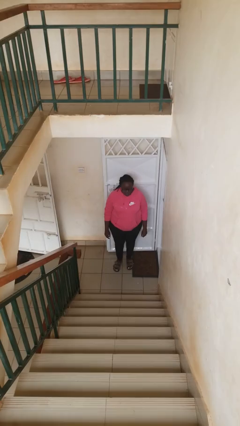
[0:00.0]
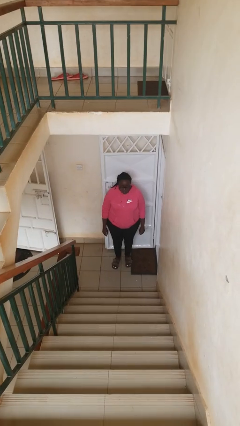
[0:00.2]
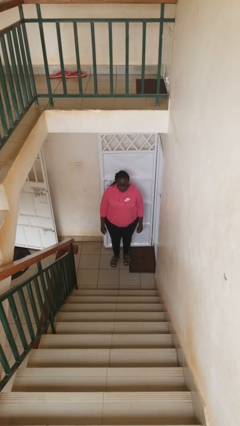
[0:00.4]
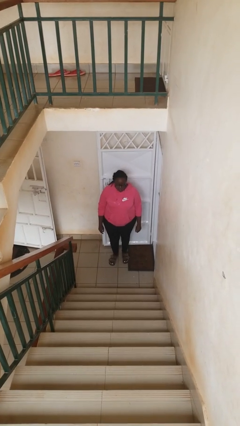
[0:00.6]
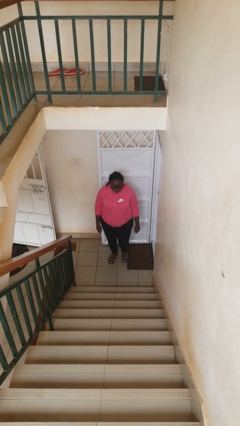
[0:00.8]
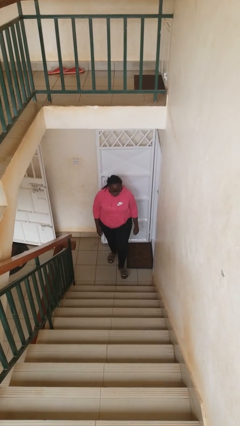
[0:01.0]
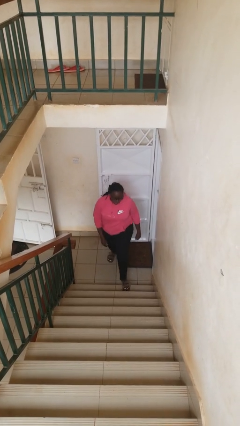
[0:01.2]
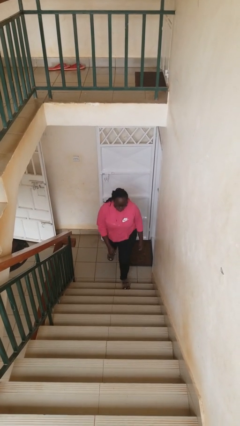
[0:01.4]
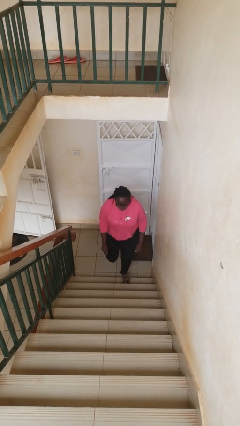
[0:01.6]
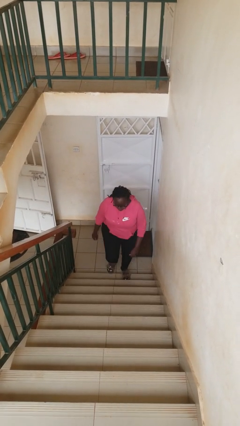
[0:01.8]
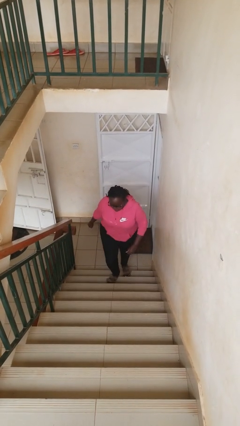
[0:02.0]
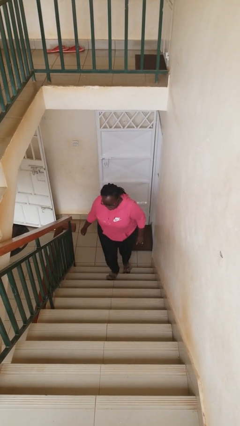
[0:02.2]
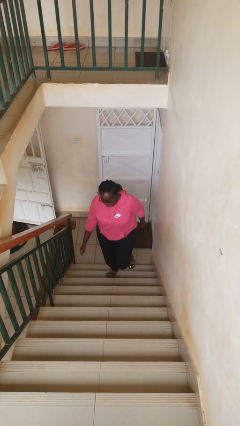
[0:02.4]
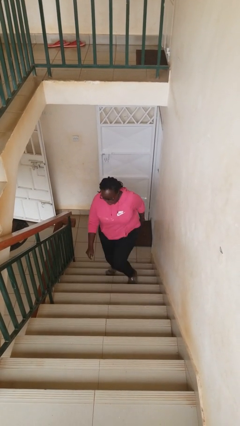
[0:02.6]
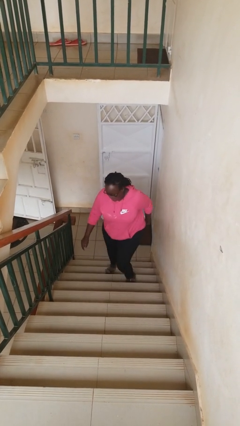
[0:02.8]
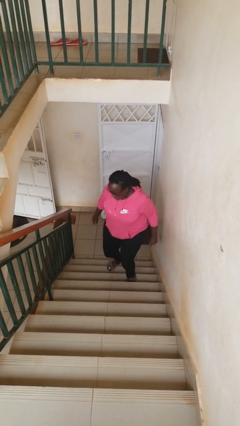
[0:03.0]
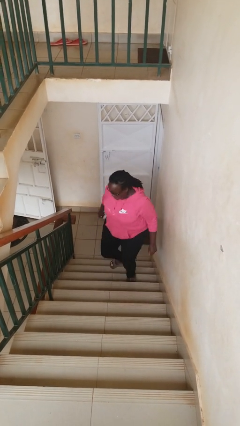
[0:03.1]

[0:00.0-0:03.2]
person climbs up stairs

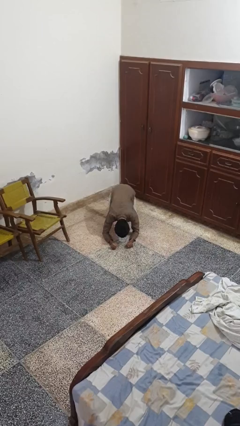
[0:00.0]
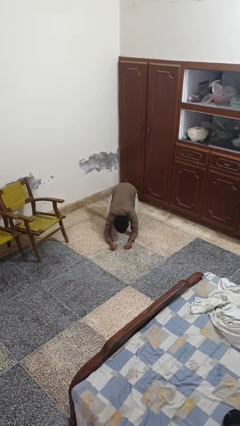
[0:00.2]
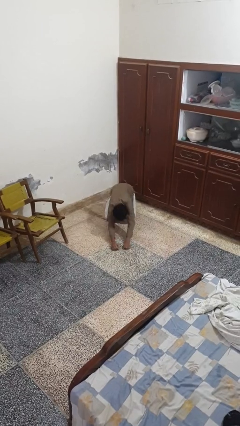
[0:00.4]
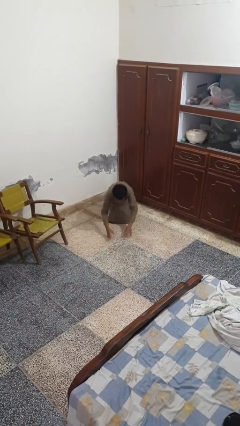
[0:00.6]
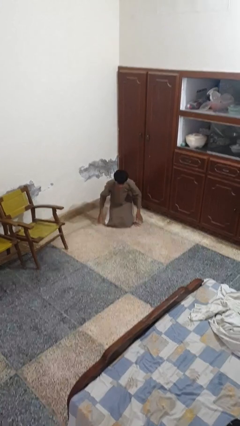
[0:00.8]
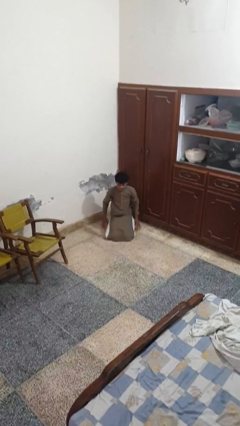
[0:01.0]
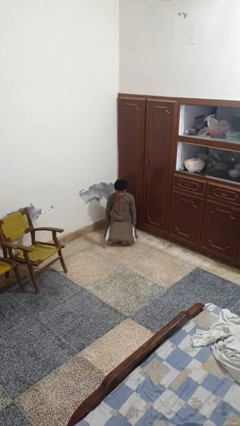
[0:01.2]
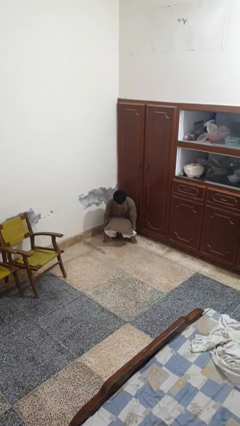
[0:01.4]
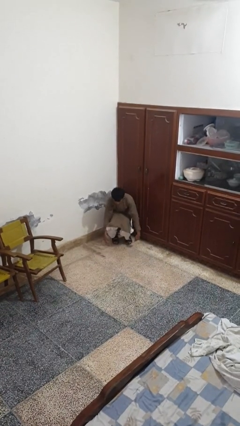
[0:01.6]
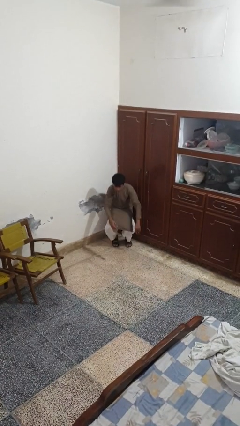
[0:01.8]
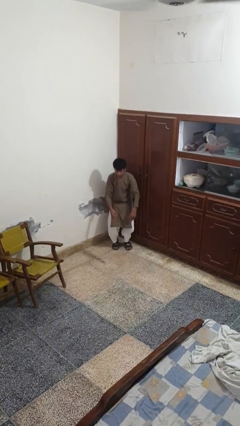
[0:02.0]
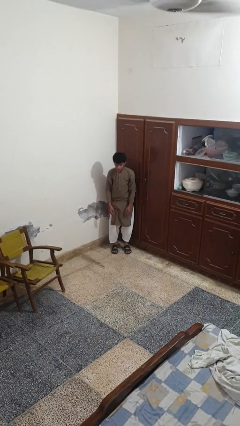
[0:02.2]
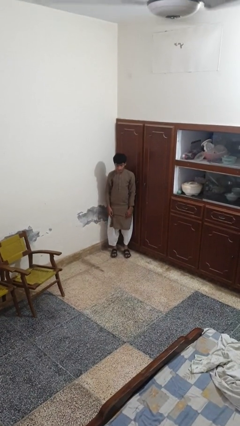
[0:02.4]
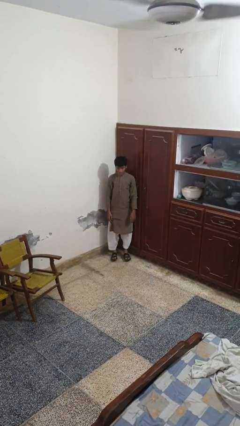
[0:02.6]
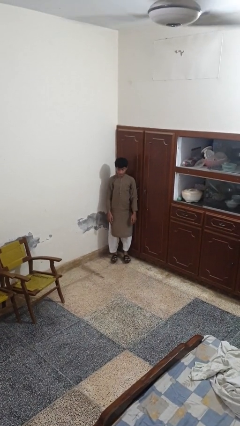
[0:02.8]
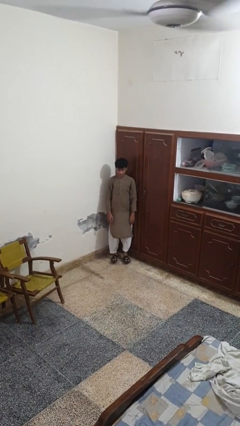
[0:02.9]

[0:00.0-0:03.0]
person stands up from floor

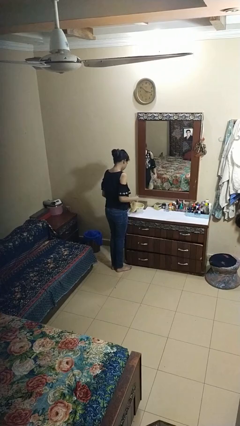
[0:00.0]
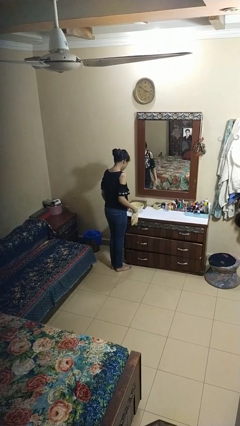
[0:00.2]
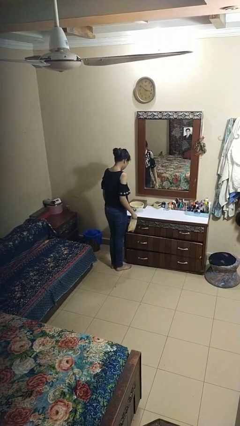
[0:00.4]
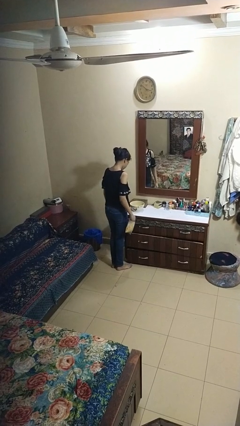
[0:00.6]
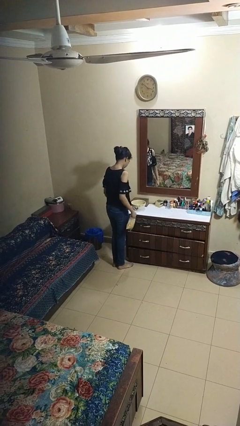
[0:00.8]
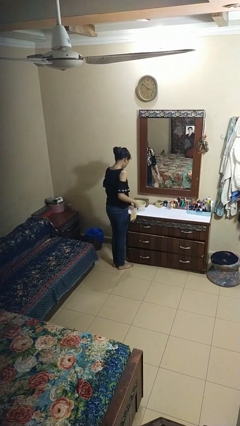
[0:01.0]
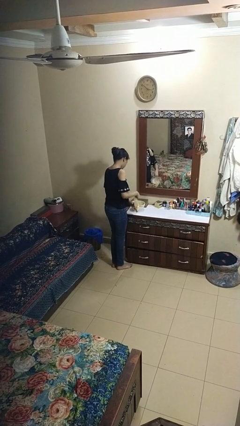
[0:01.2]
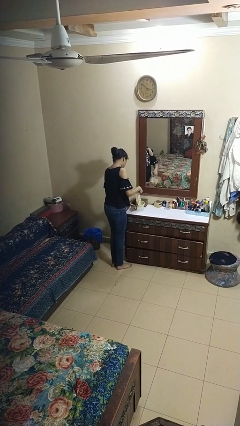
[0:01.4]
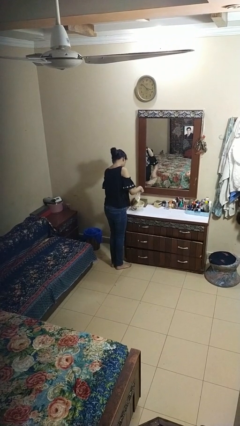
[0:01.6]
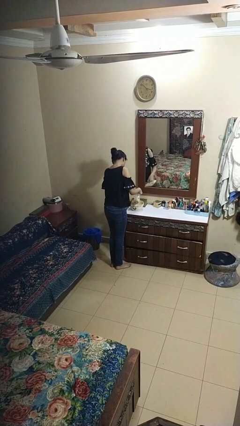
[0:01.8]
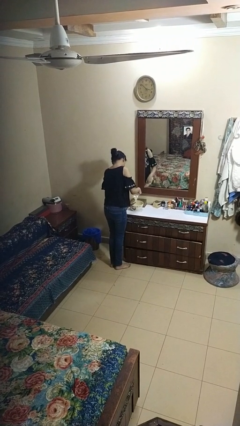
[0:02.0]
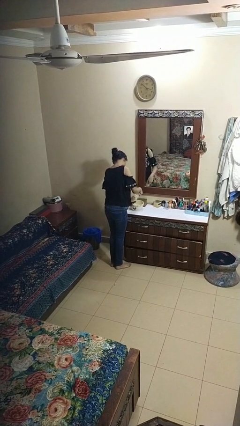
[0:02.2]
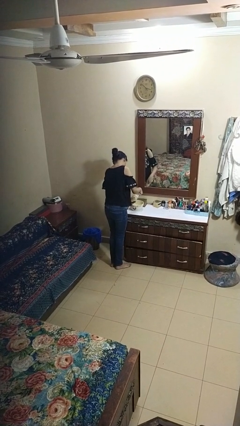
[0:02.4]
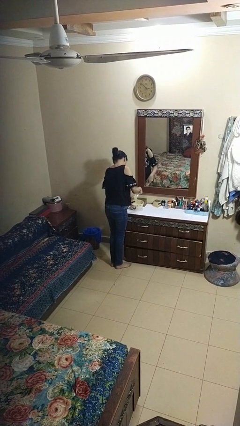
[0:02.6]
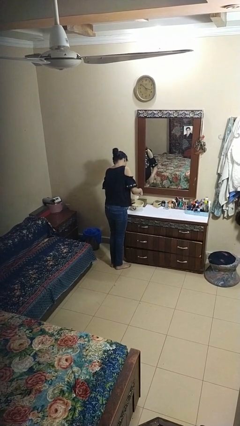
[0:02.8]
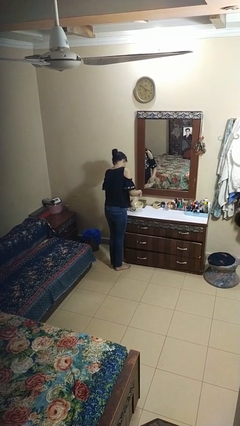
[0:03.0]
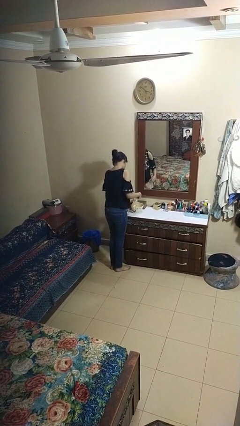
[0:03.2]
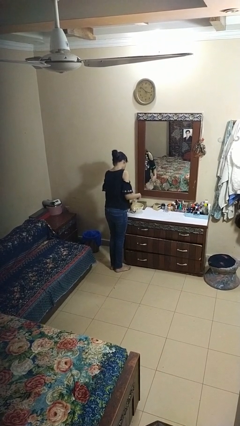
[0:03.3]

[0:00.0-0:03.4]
person pours into bowl

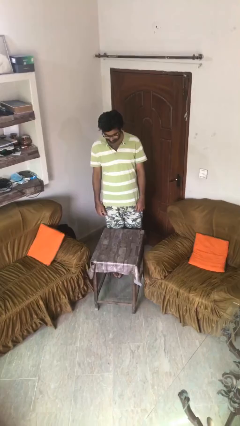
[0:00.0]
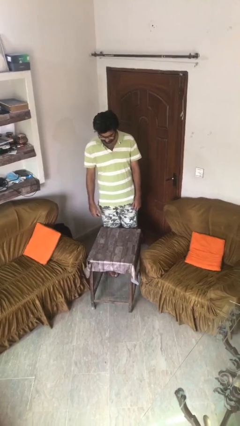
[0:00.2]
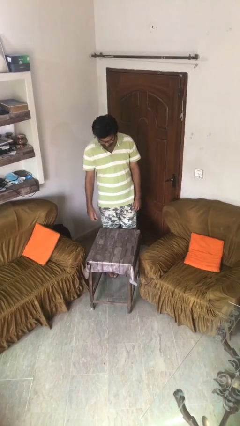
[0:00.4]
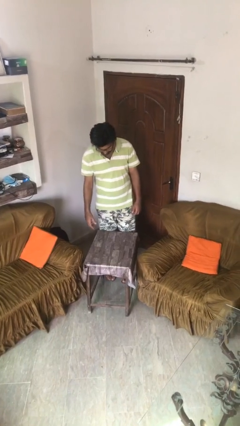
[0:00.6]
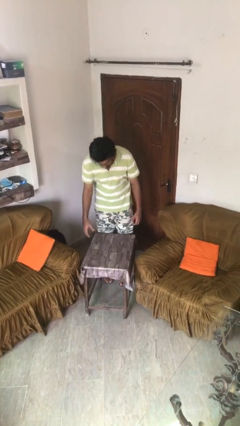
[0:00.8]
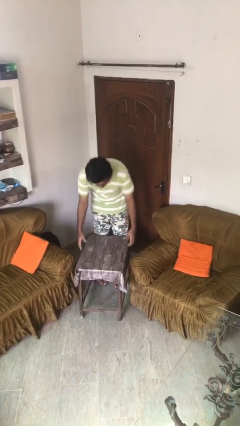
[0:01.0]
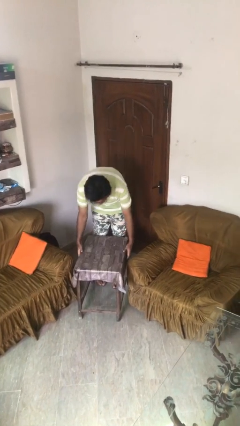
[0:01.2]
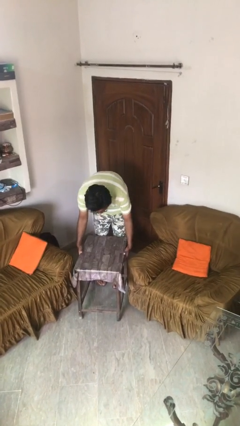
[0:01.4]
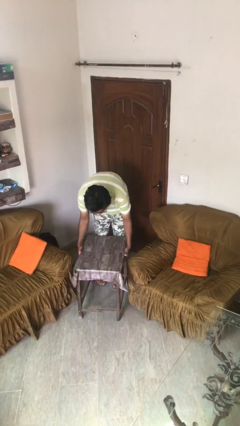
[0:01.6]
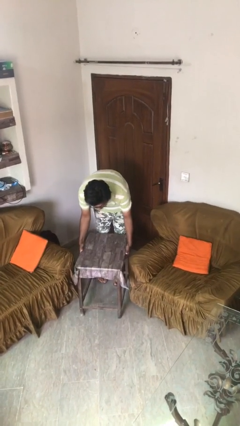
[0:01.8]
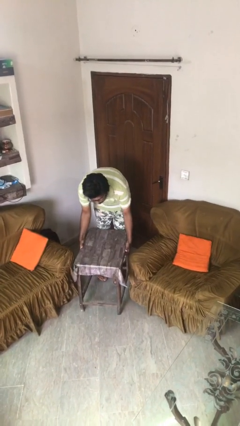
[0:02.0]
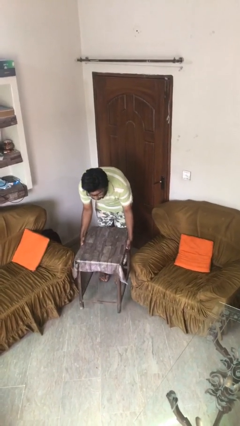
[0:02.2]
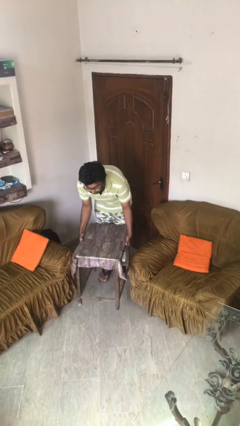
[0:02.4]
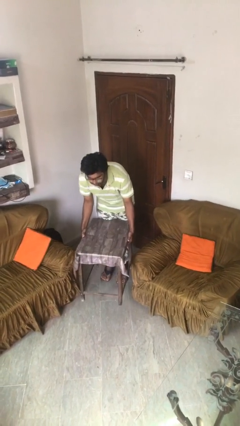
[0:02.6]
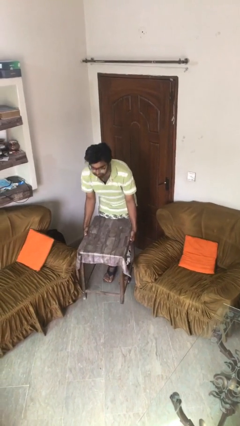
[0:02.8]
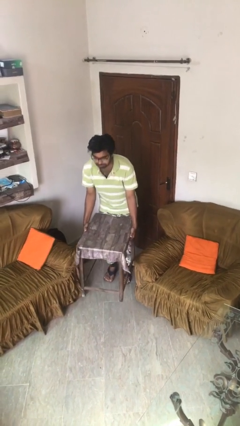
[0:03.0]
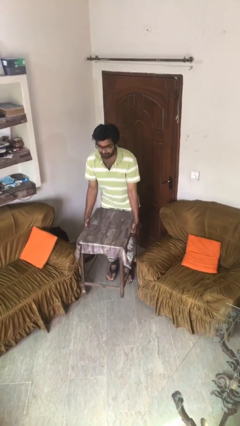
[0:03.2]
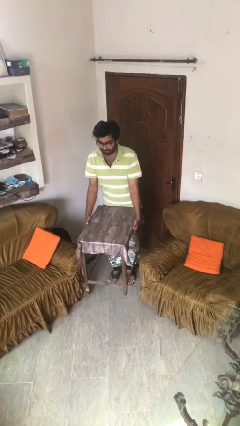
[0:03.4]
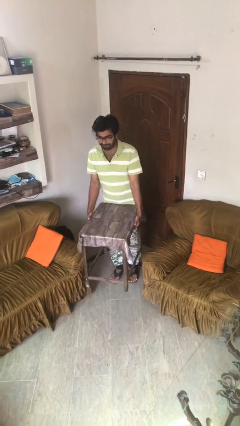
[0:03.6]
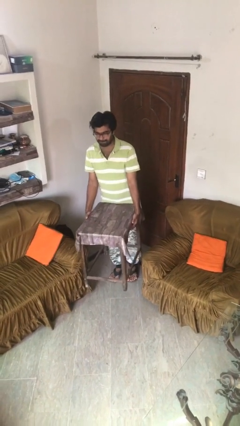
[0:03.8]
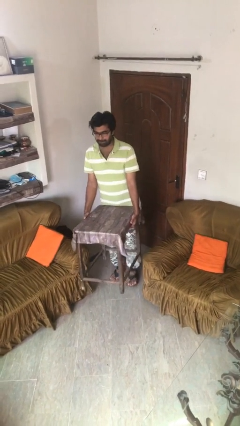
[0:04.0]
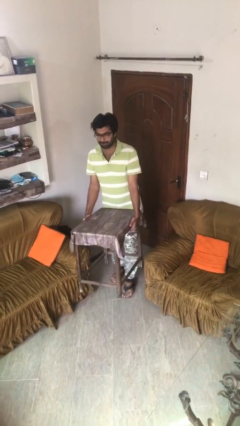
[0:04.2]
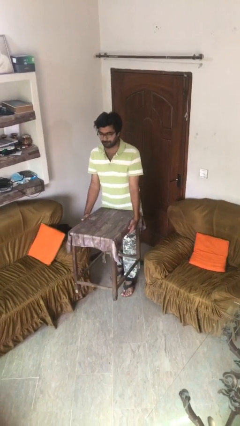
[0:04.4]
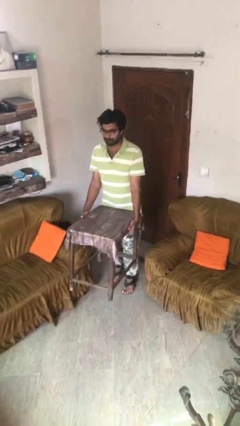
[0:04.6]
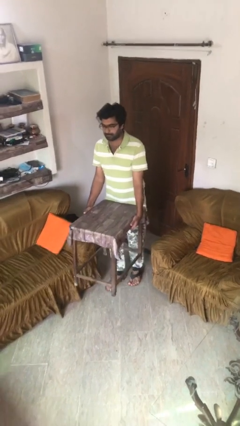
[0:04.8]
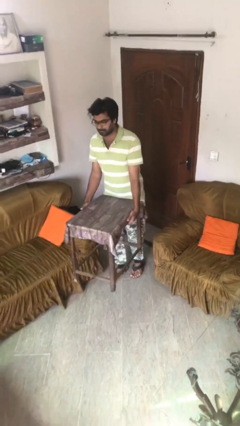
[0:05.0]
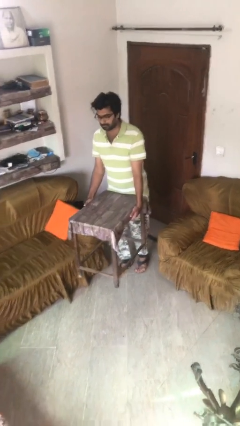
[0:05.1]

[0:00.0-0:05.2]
person picks up object from floor

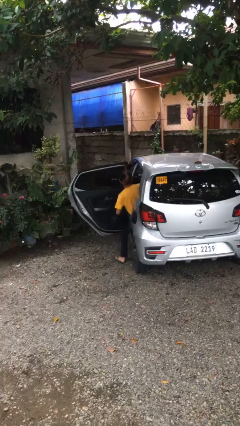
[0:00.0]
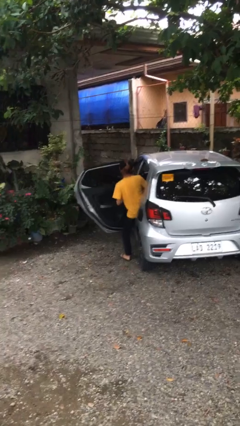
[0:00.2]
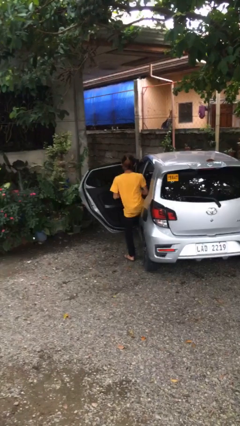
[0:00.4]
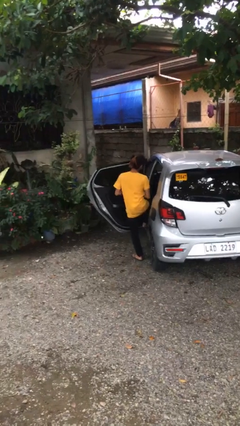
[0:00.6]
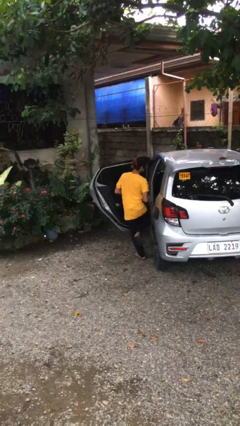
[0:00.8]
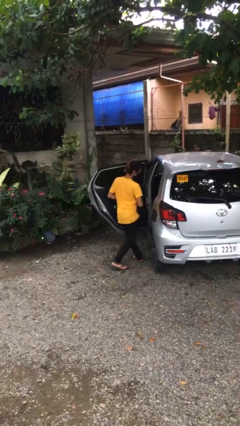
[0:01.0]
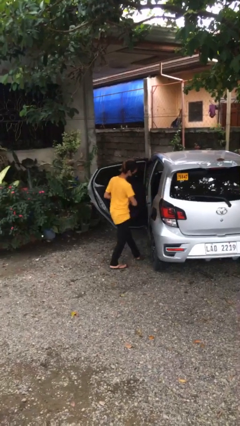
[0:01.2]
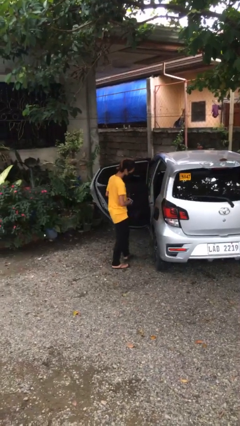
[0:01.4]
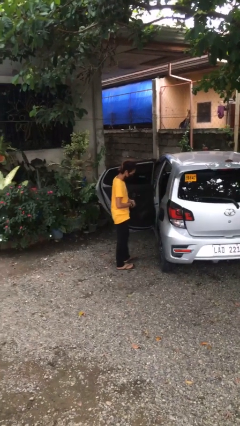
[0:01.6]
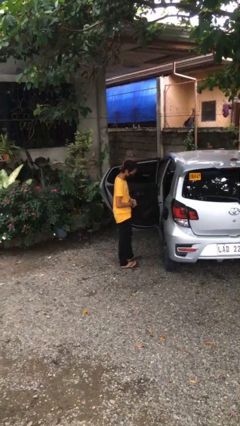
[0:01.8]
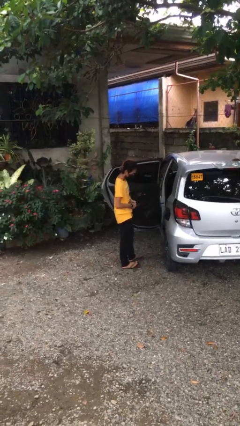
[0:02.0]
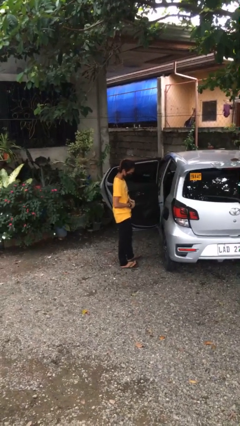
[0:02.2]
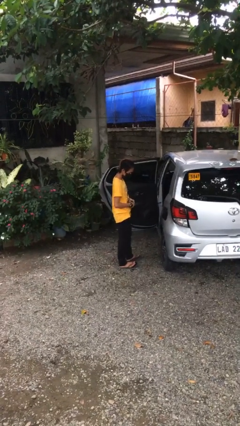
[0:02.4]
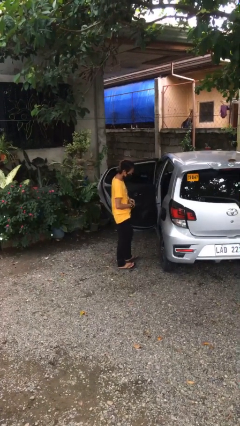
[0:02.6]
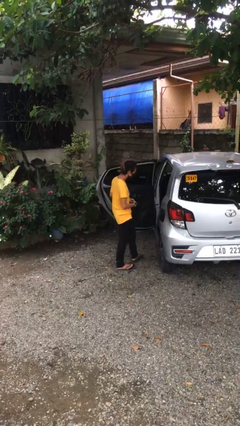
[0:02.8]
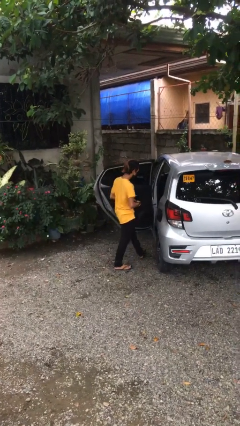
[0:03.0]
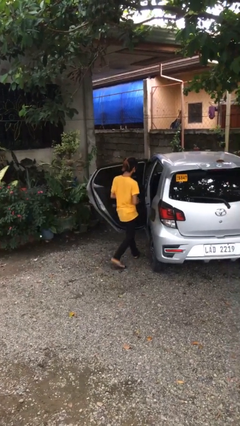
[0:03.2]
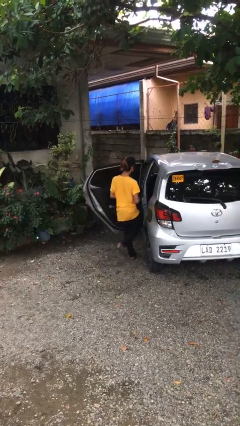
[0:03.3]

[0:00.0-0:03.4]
person exits car
